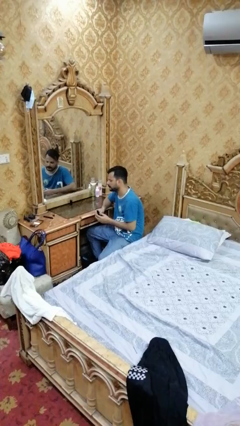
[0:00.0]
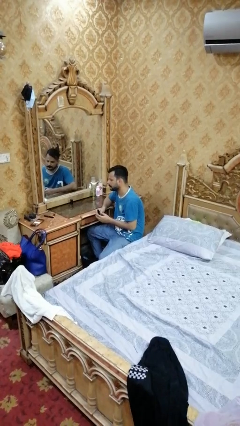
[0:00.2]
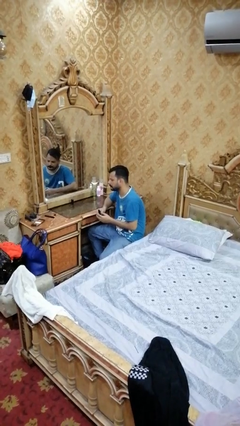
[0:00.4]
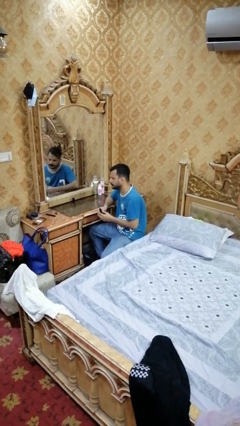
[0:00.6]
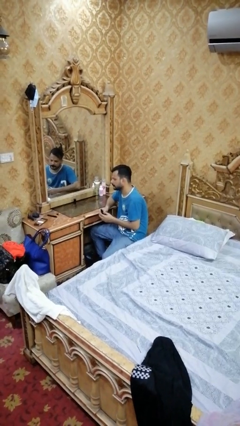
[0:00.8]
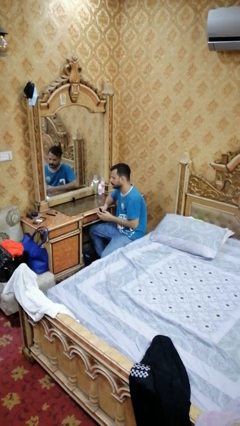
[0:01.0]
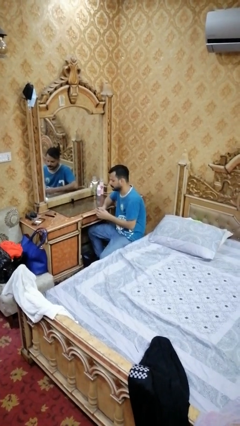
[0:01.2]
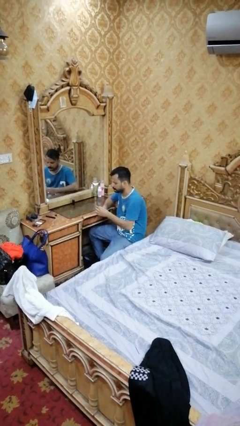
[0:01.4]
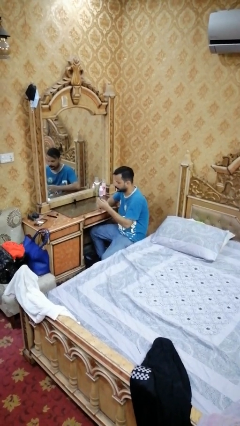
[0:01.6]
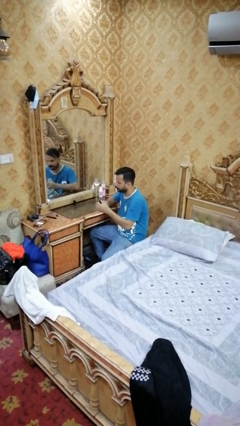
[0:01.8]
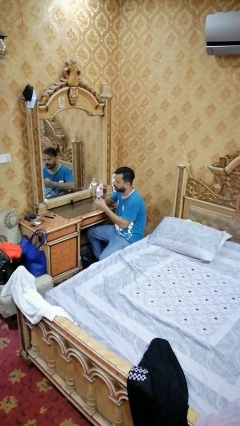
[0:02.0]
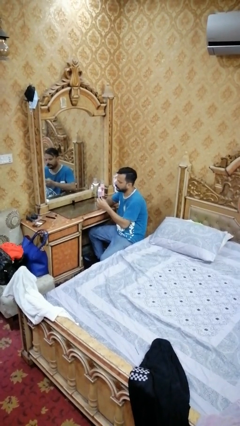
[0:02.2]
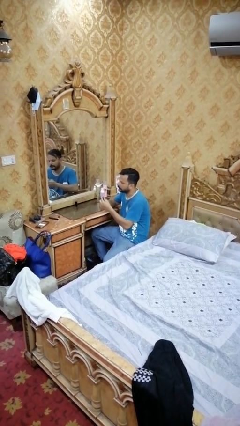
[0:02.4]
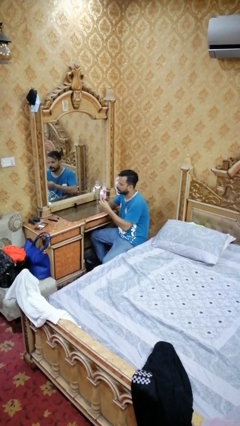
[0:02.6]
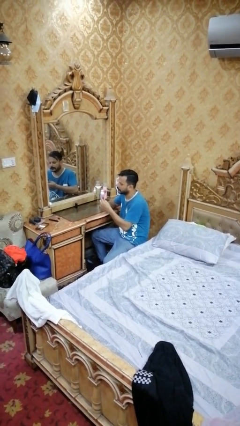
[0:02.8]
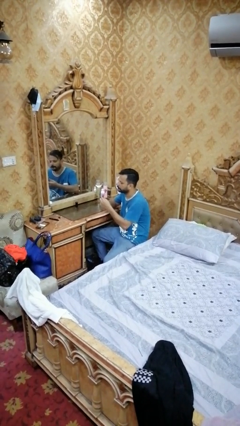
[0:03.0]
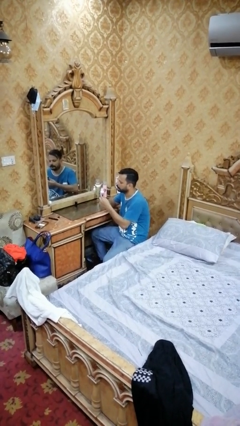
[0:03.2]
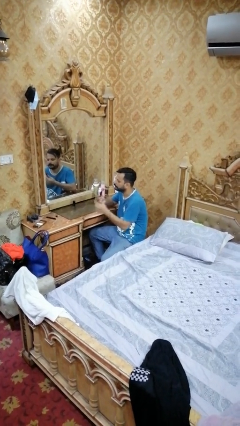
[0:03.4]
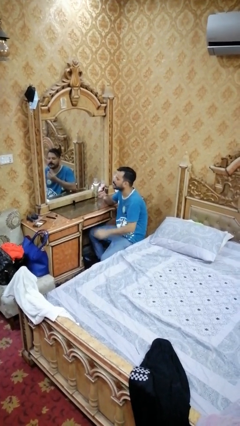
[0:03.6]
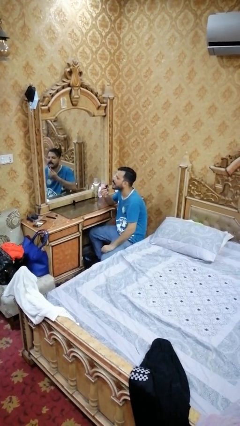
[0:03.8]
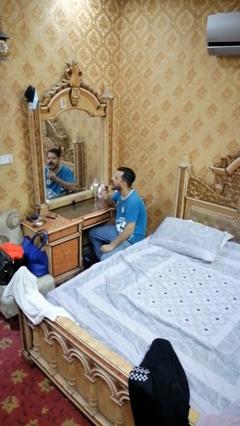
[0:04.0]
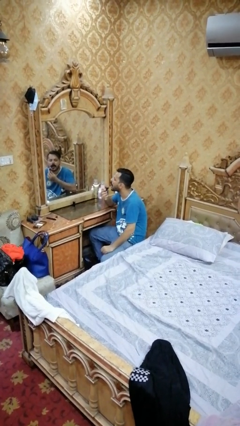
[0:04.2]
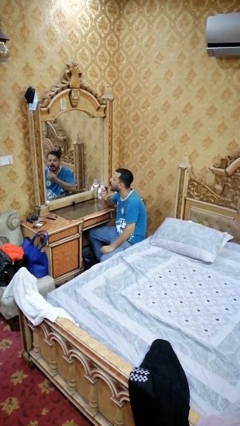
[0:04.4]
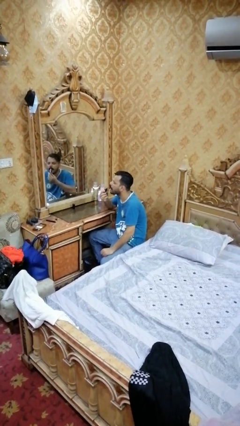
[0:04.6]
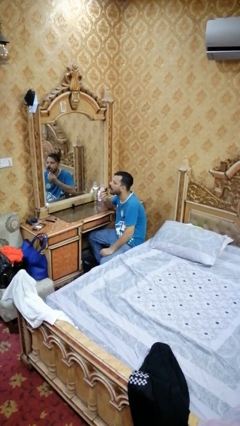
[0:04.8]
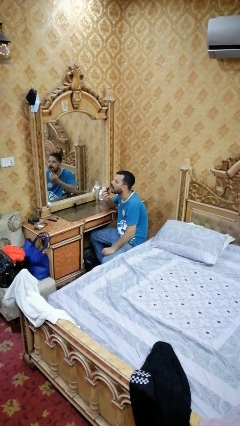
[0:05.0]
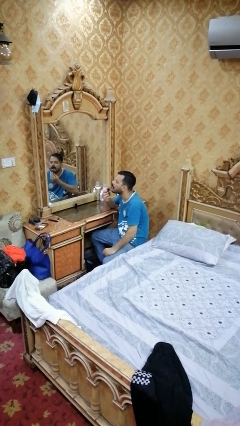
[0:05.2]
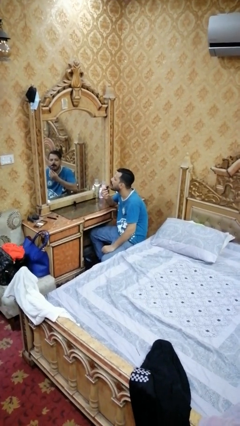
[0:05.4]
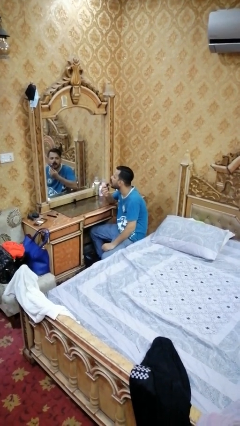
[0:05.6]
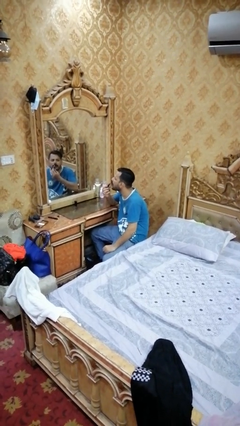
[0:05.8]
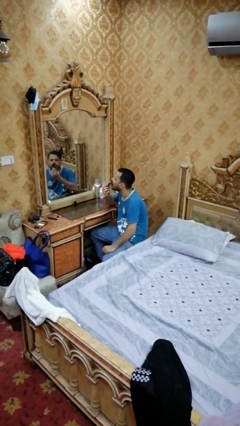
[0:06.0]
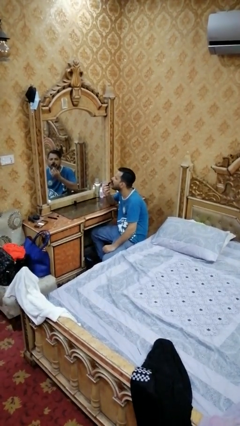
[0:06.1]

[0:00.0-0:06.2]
person applies lip makeup

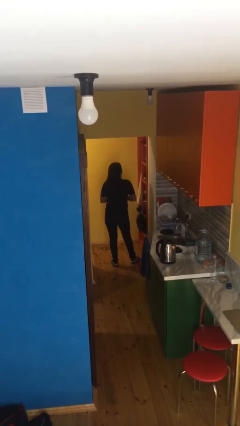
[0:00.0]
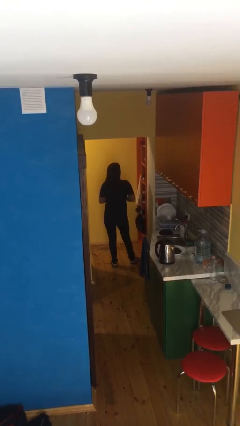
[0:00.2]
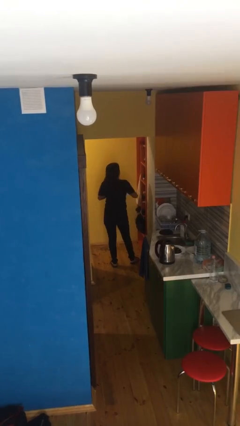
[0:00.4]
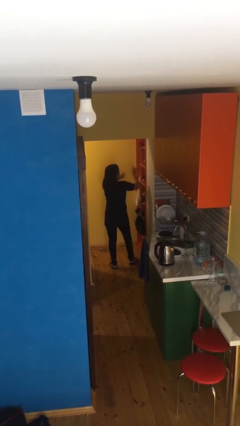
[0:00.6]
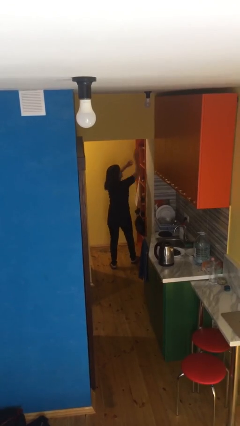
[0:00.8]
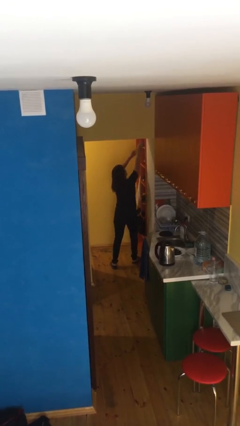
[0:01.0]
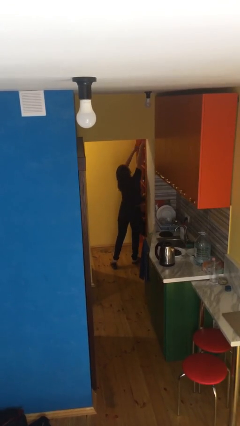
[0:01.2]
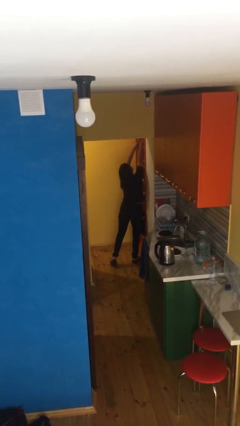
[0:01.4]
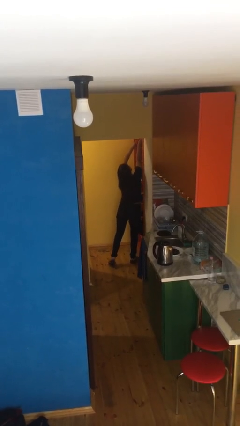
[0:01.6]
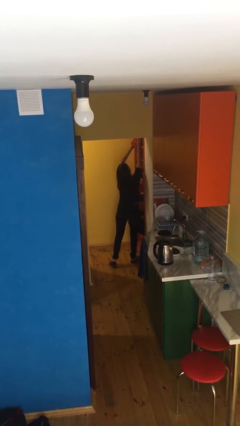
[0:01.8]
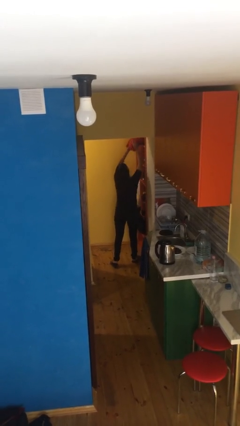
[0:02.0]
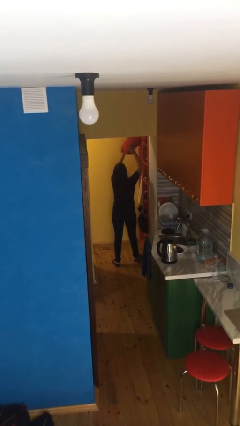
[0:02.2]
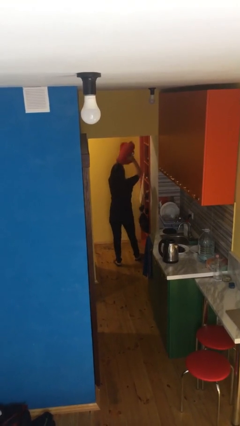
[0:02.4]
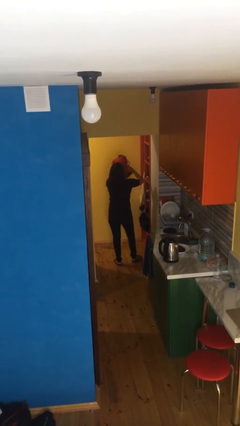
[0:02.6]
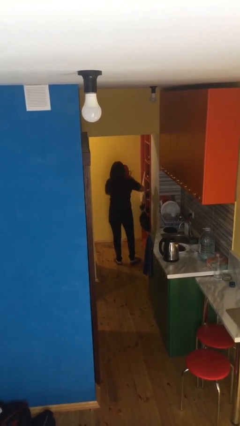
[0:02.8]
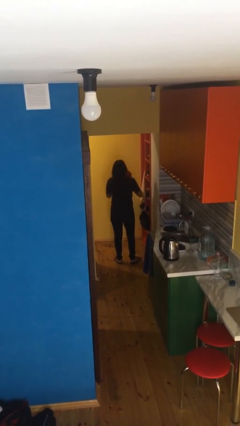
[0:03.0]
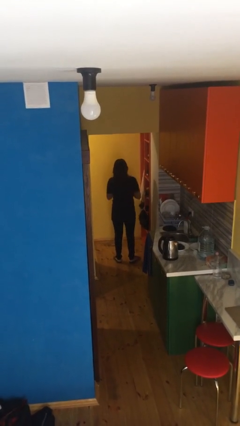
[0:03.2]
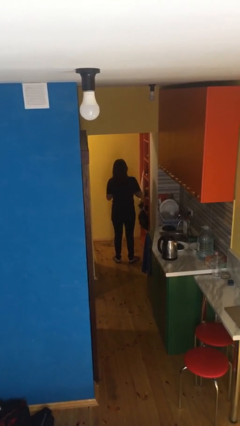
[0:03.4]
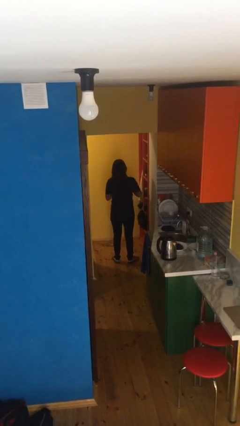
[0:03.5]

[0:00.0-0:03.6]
person picks up object from shelf

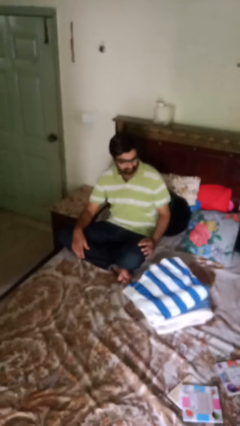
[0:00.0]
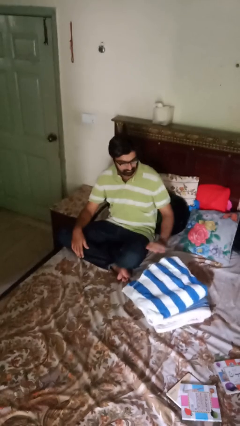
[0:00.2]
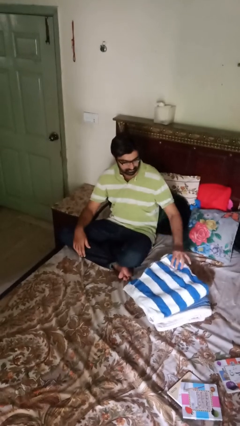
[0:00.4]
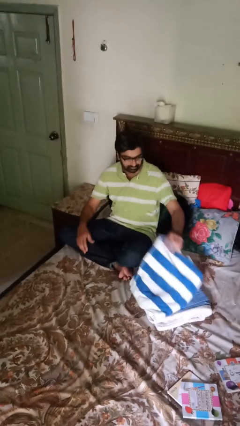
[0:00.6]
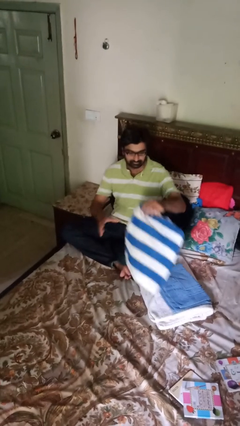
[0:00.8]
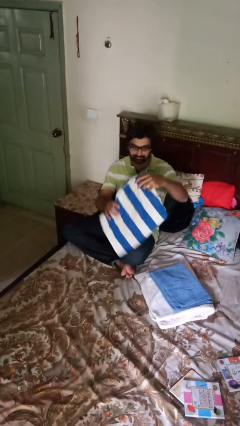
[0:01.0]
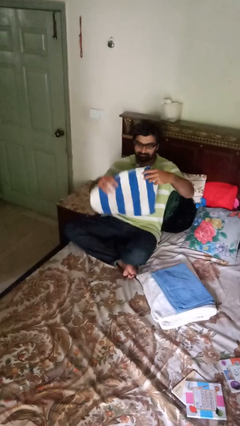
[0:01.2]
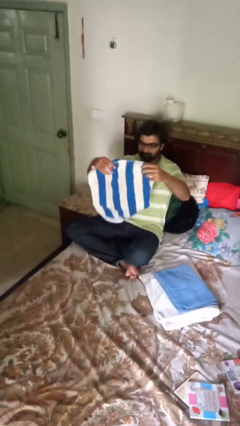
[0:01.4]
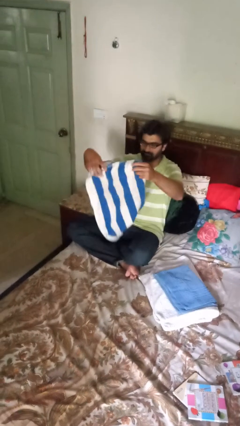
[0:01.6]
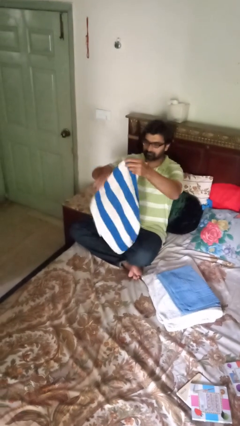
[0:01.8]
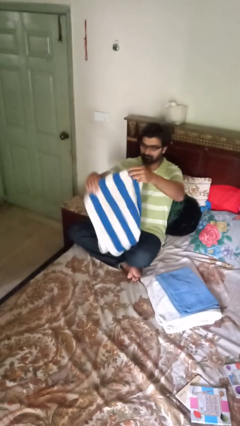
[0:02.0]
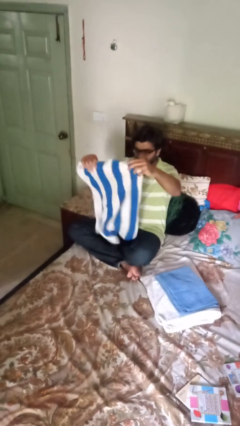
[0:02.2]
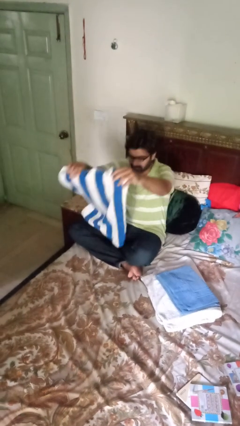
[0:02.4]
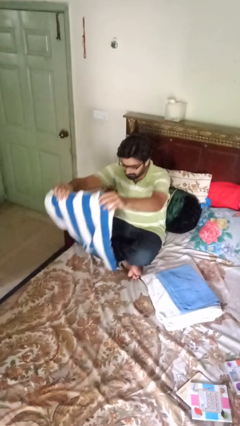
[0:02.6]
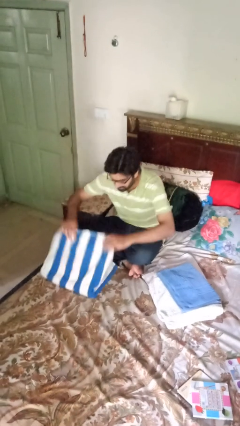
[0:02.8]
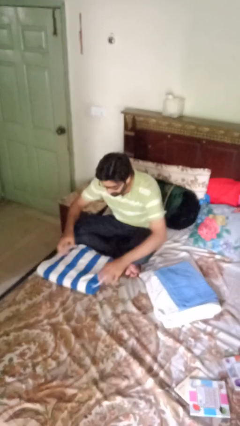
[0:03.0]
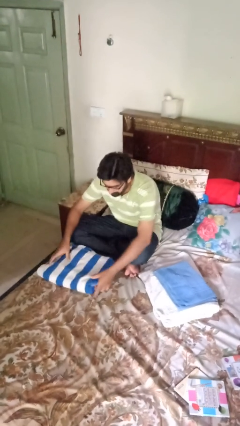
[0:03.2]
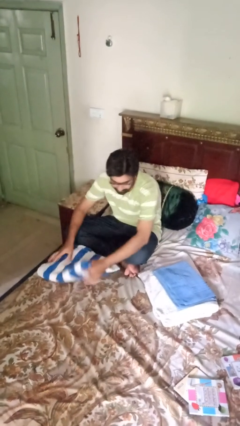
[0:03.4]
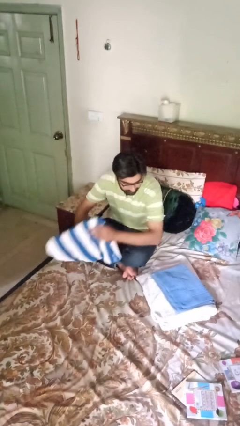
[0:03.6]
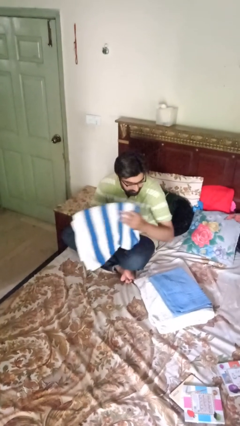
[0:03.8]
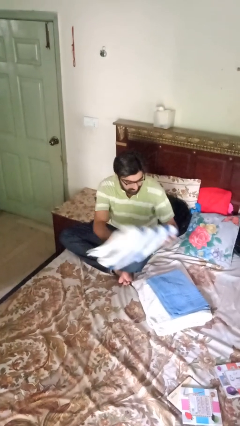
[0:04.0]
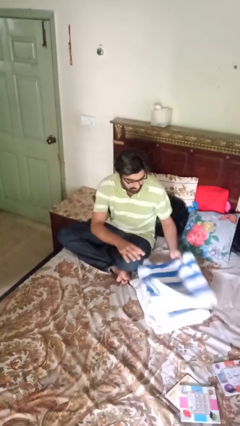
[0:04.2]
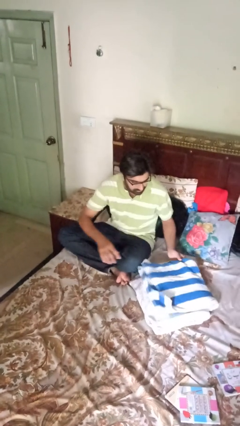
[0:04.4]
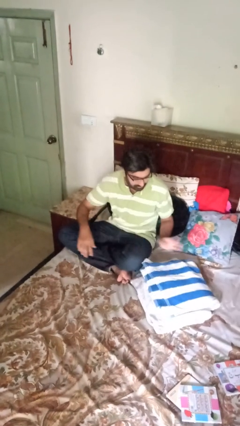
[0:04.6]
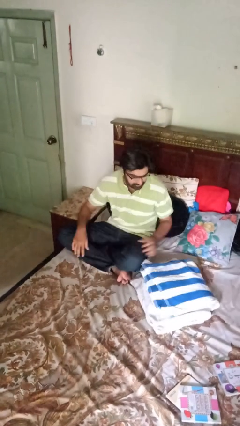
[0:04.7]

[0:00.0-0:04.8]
person folds towel

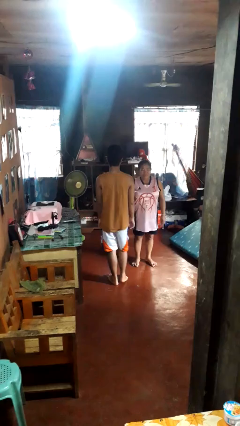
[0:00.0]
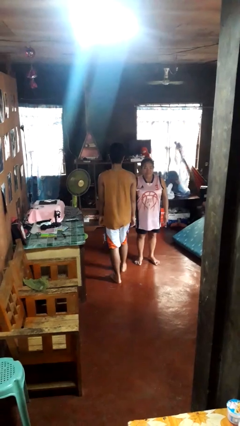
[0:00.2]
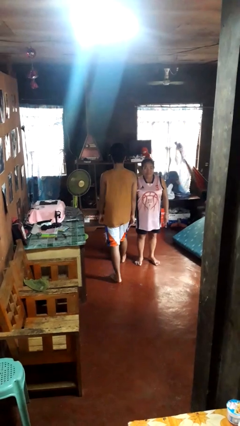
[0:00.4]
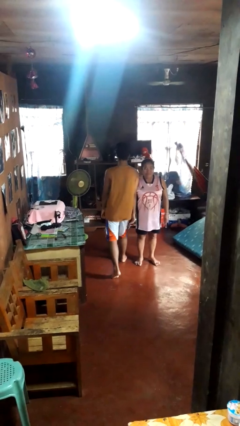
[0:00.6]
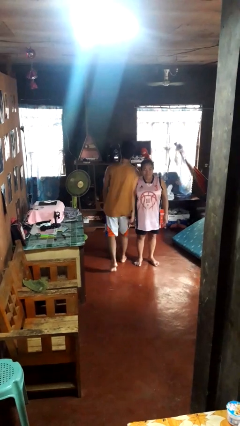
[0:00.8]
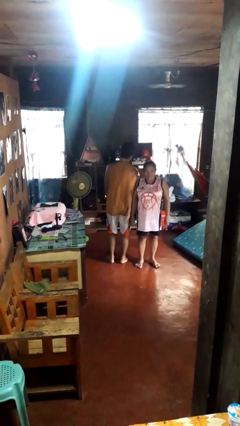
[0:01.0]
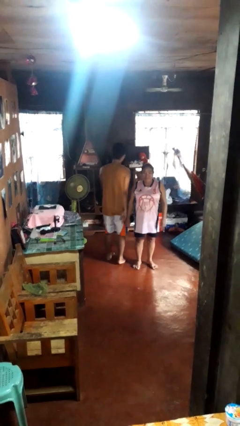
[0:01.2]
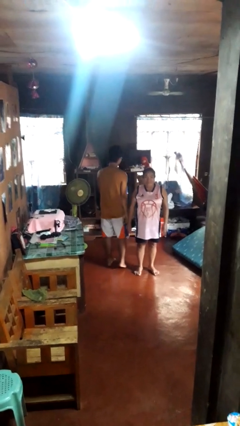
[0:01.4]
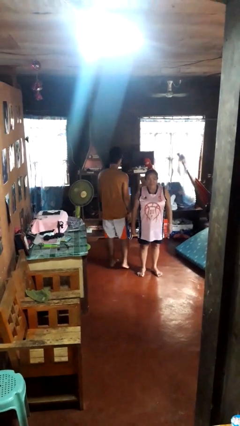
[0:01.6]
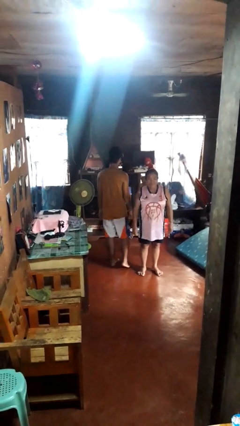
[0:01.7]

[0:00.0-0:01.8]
person bumps into person

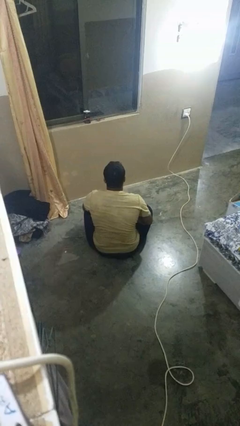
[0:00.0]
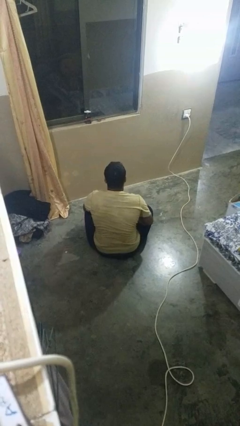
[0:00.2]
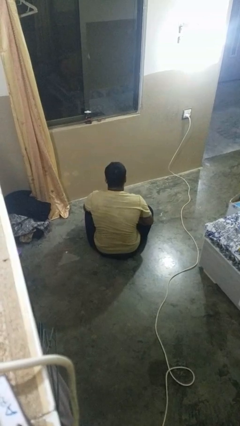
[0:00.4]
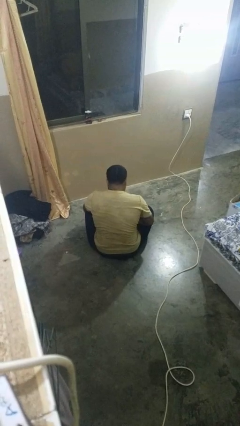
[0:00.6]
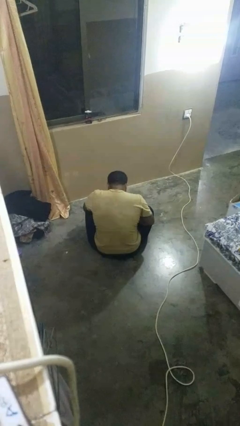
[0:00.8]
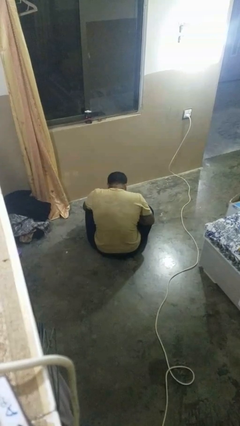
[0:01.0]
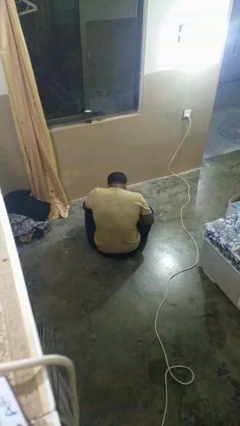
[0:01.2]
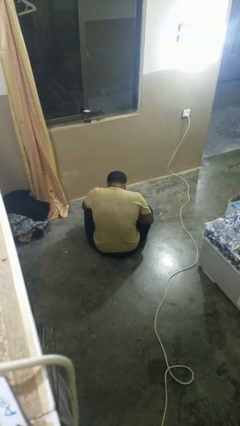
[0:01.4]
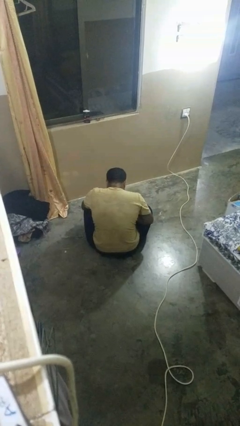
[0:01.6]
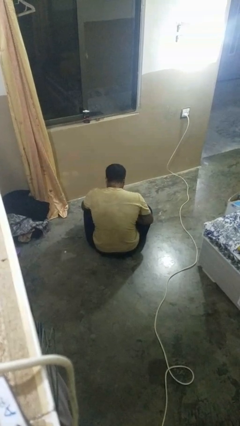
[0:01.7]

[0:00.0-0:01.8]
person looks at hands in lap
